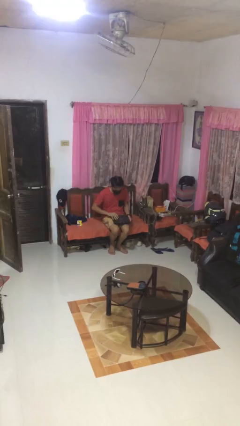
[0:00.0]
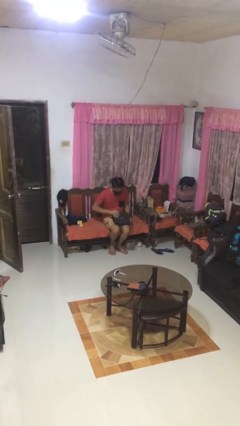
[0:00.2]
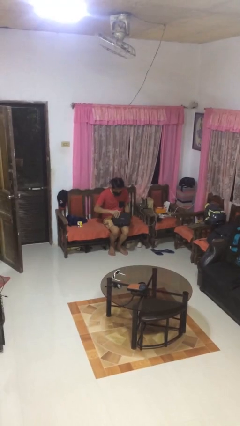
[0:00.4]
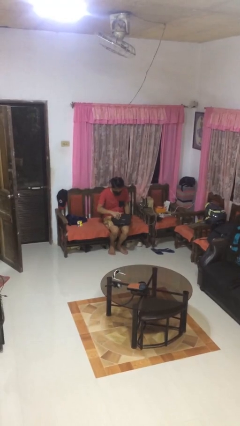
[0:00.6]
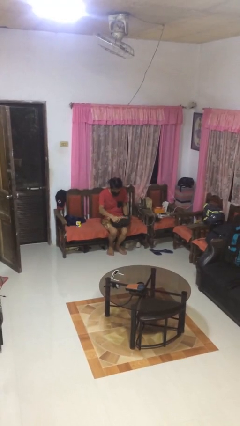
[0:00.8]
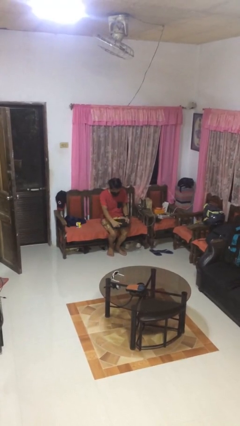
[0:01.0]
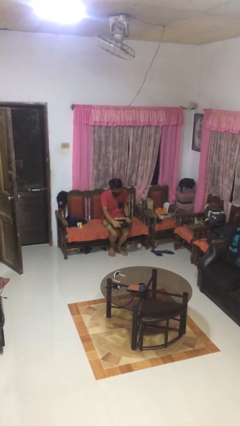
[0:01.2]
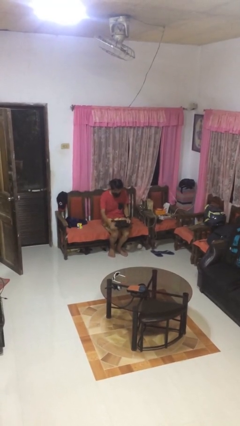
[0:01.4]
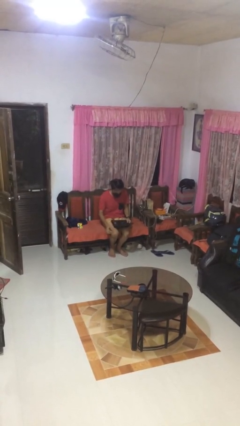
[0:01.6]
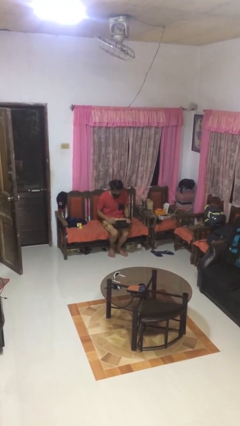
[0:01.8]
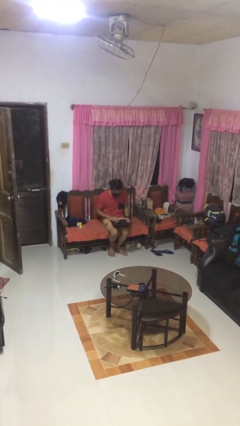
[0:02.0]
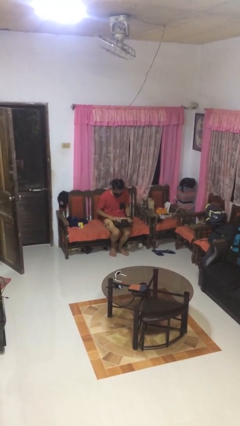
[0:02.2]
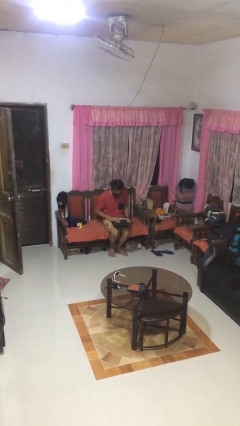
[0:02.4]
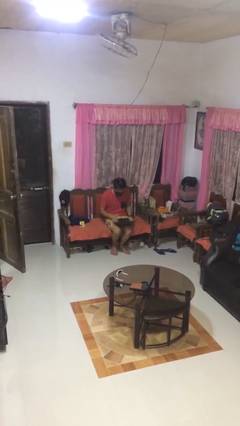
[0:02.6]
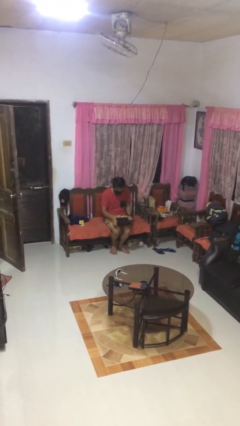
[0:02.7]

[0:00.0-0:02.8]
person opens laptop

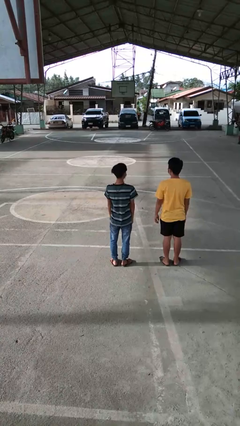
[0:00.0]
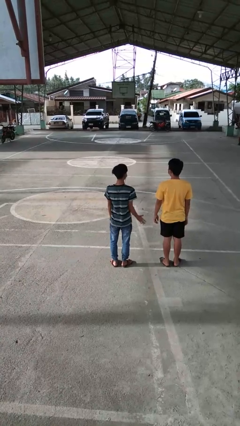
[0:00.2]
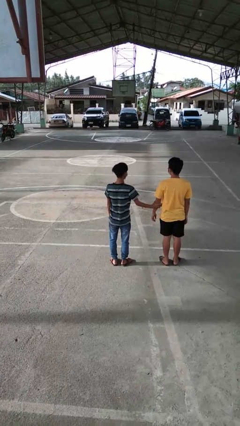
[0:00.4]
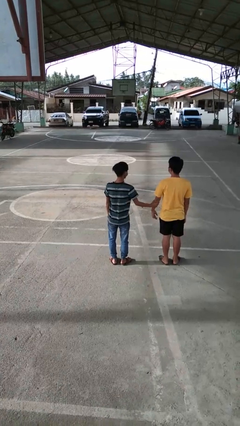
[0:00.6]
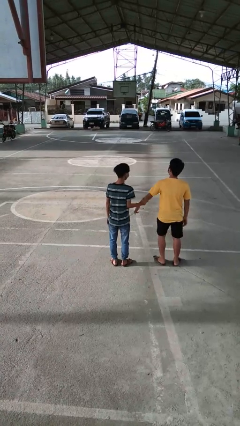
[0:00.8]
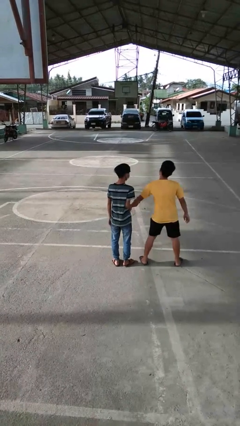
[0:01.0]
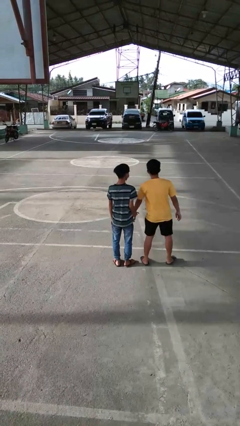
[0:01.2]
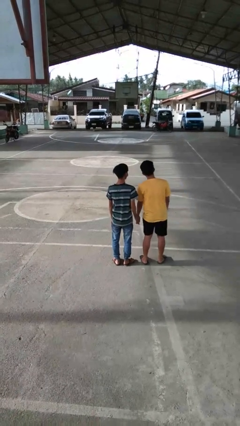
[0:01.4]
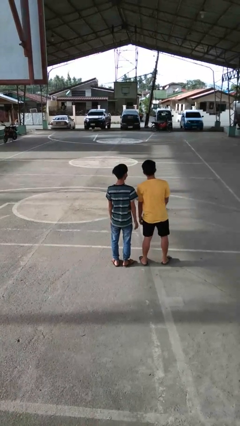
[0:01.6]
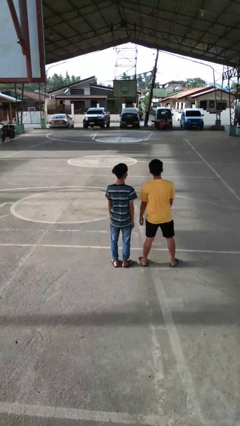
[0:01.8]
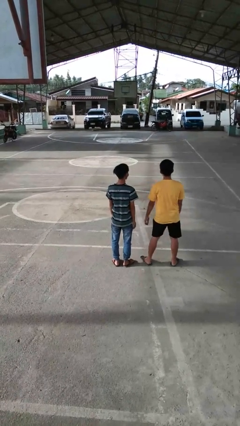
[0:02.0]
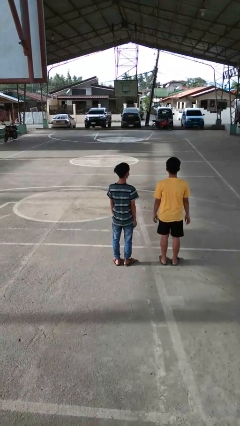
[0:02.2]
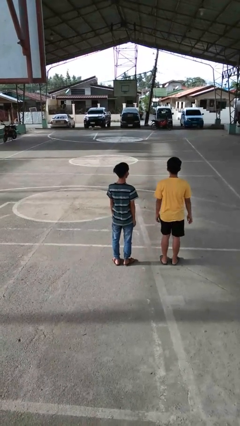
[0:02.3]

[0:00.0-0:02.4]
person grabs person by forearm

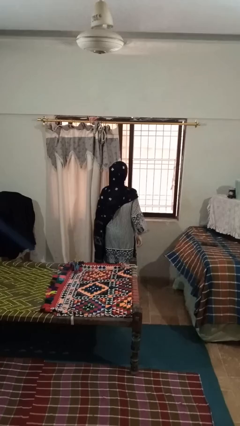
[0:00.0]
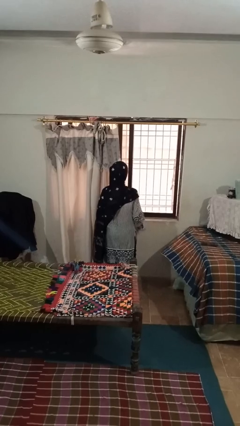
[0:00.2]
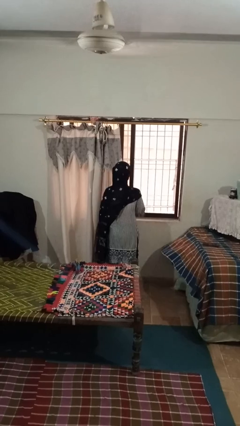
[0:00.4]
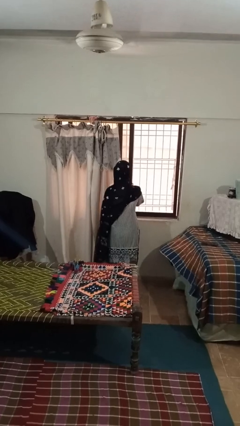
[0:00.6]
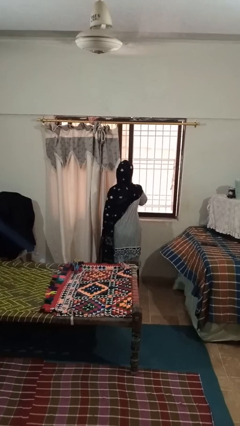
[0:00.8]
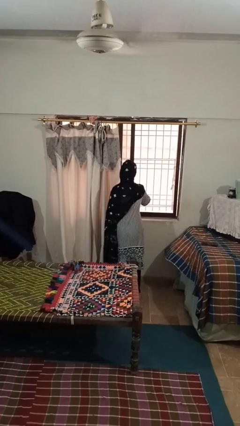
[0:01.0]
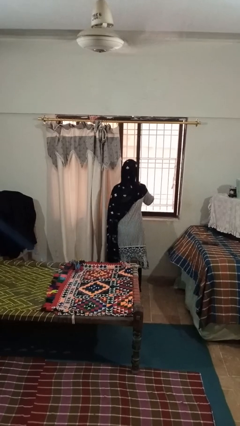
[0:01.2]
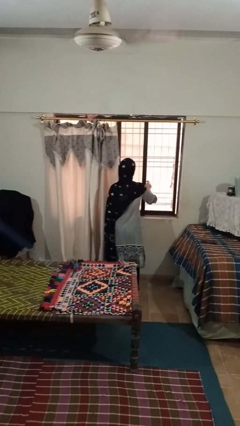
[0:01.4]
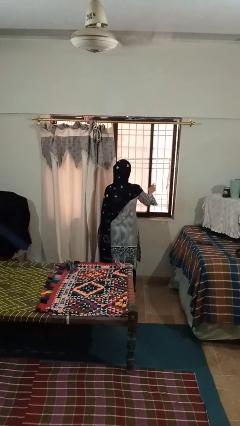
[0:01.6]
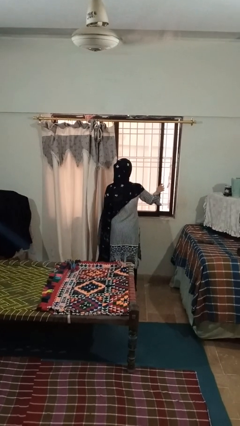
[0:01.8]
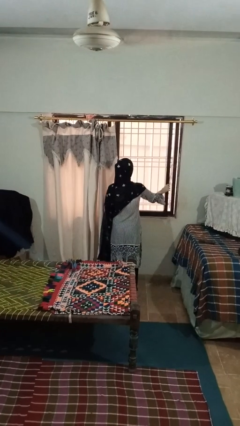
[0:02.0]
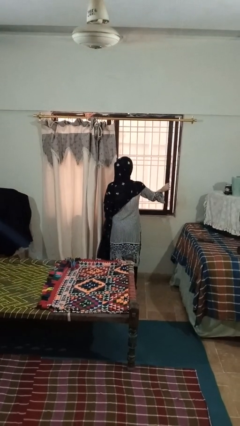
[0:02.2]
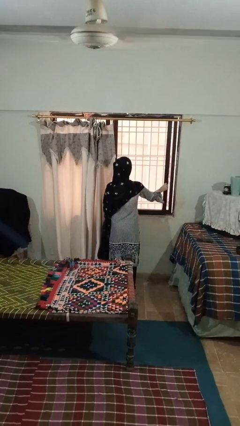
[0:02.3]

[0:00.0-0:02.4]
person closes home window

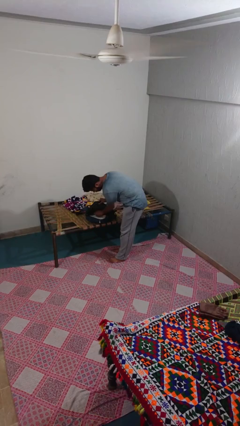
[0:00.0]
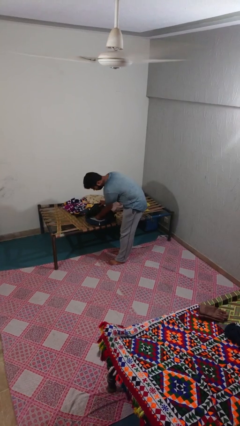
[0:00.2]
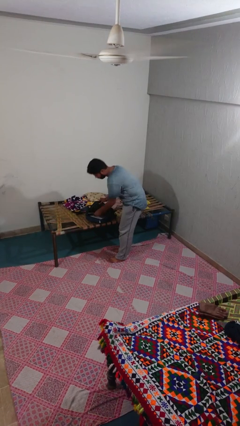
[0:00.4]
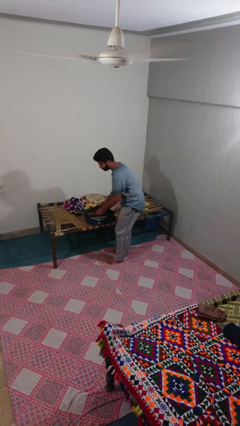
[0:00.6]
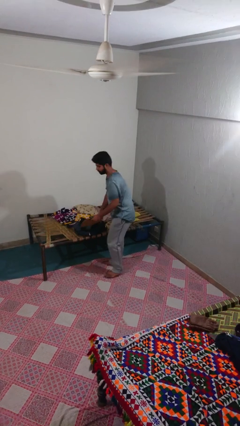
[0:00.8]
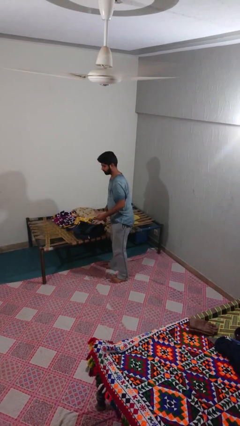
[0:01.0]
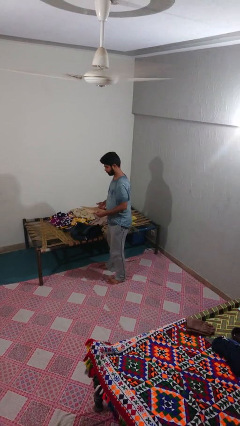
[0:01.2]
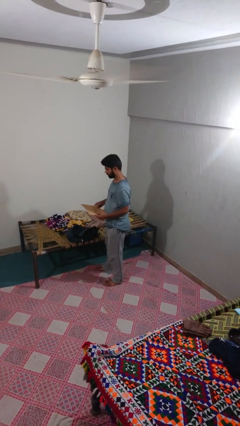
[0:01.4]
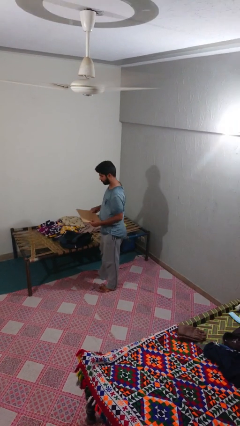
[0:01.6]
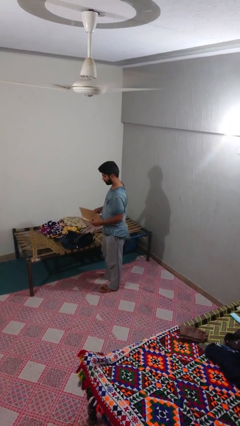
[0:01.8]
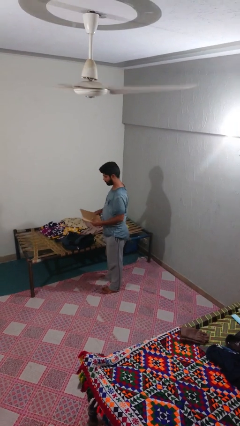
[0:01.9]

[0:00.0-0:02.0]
person takes object from backpack

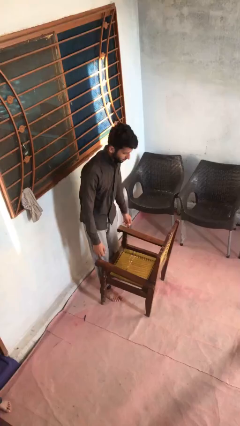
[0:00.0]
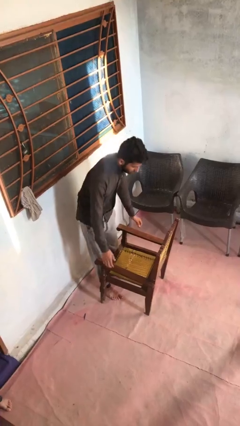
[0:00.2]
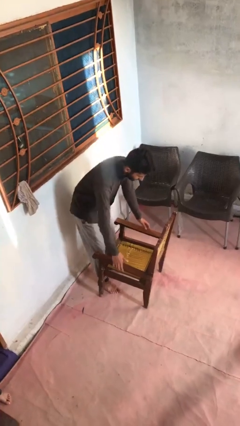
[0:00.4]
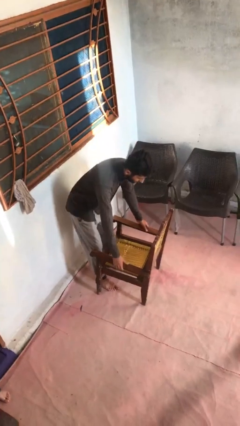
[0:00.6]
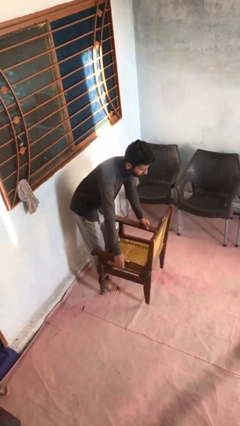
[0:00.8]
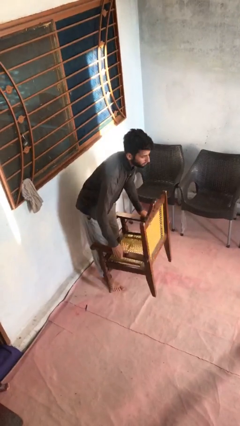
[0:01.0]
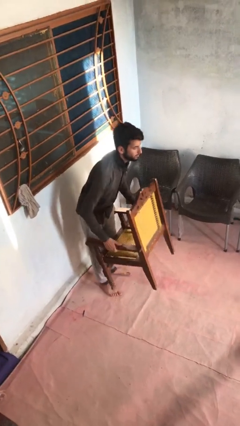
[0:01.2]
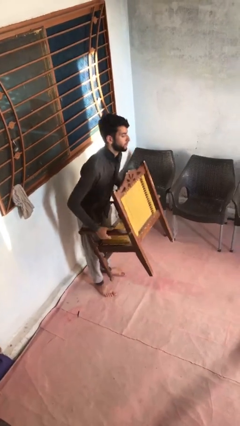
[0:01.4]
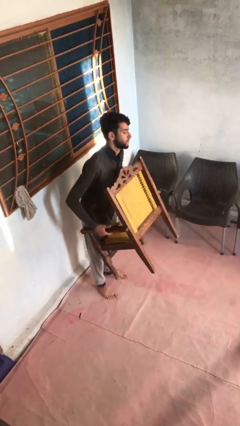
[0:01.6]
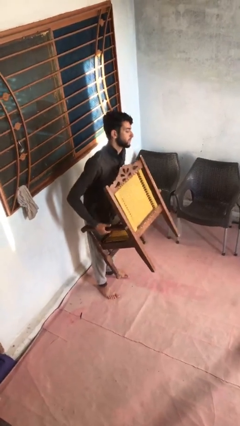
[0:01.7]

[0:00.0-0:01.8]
person picks up object from floor

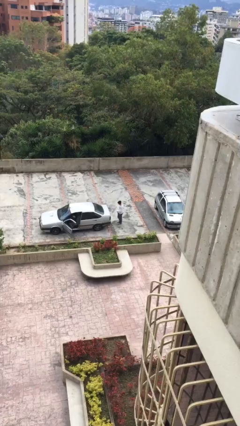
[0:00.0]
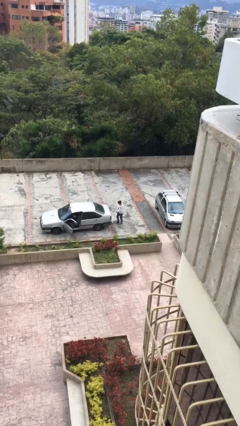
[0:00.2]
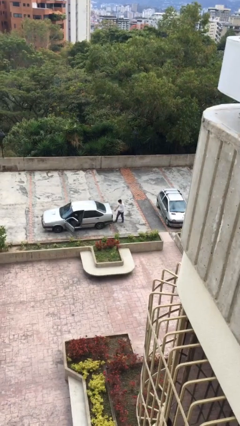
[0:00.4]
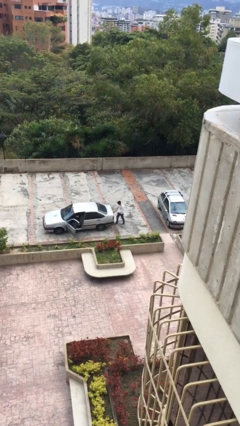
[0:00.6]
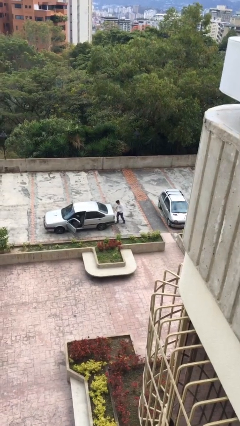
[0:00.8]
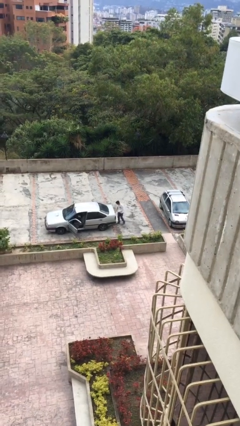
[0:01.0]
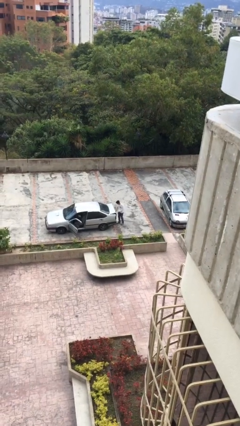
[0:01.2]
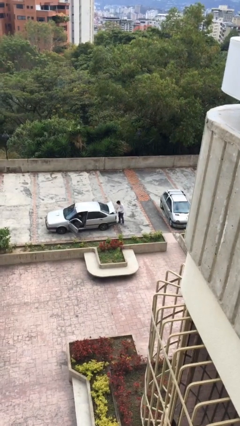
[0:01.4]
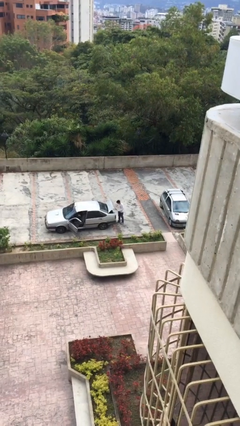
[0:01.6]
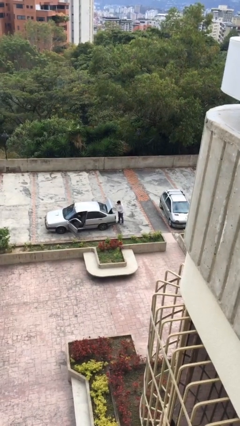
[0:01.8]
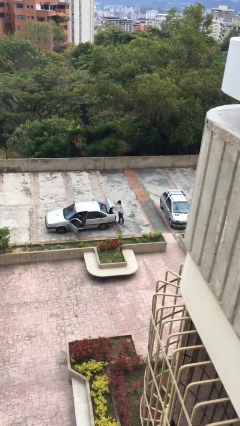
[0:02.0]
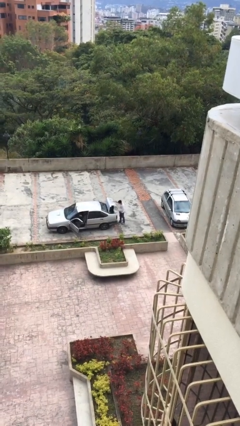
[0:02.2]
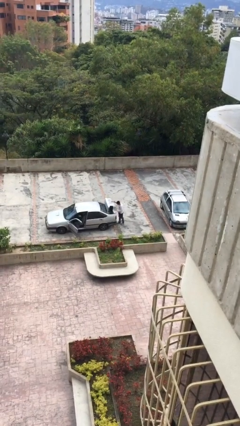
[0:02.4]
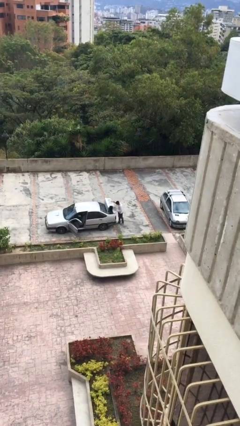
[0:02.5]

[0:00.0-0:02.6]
person opens car trunk

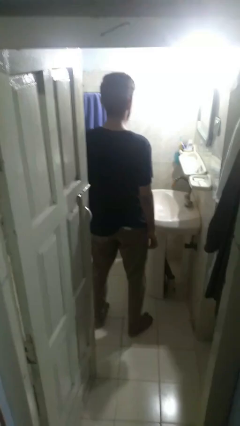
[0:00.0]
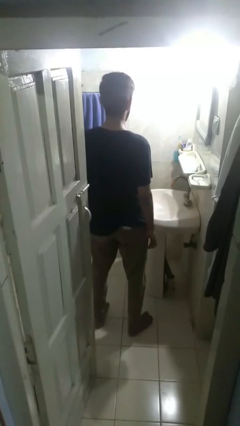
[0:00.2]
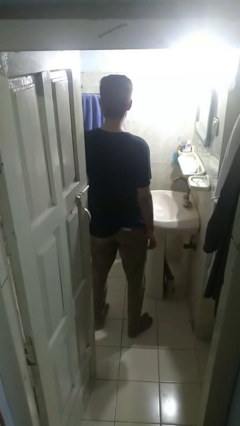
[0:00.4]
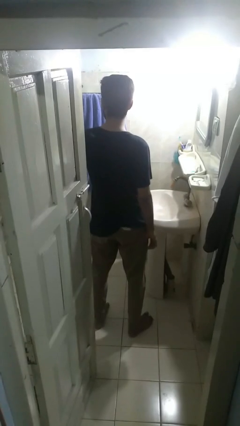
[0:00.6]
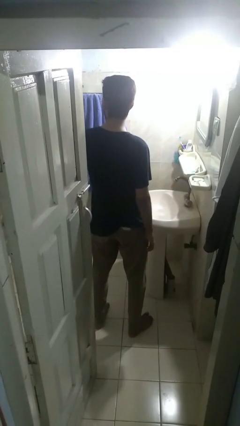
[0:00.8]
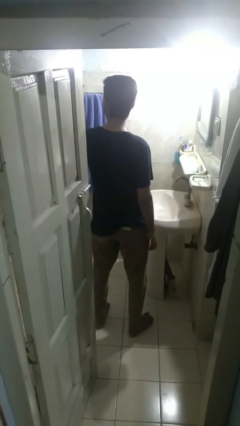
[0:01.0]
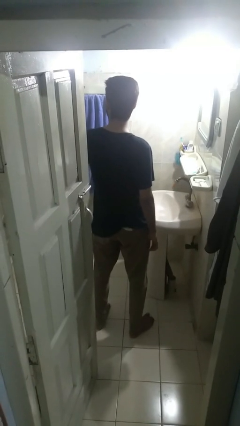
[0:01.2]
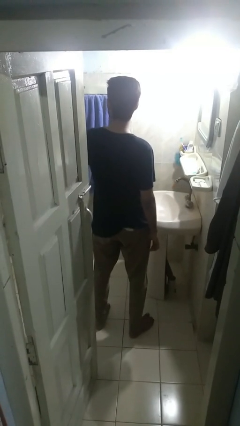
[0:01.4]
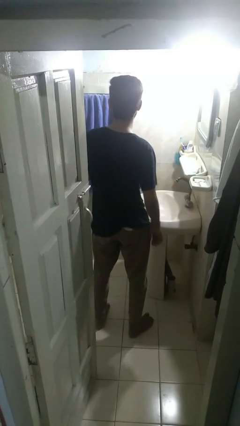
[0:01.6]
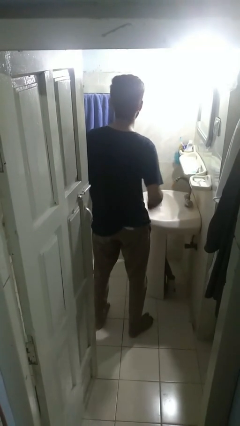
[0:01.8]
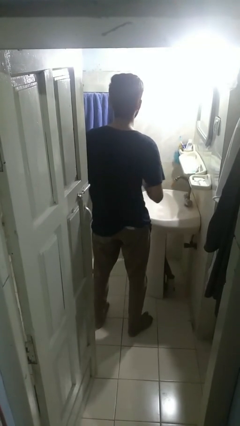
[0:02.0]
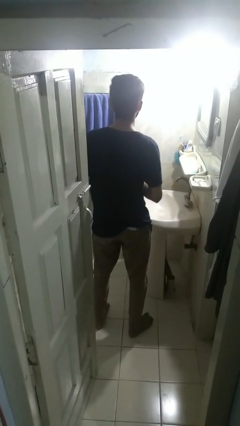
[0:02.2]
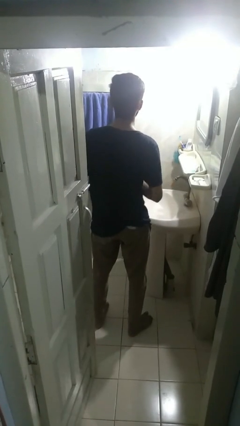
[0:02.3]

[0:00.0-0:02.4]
person flosses

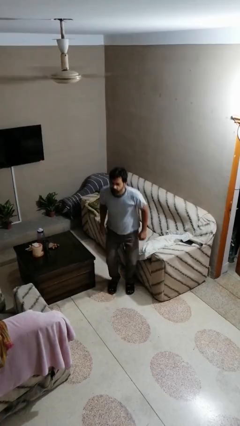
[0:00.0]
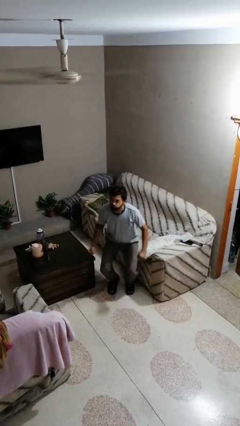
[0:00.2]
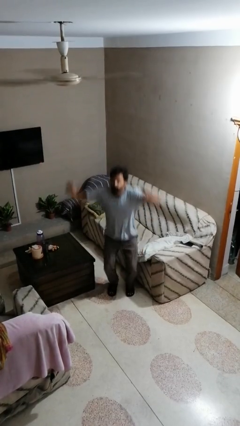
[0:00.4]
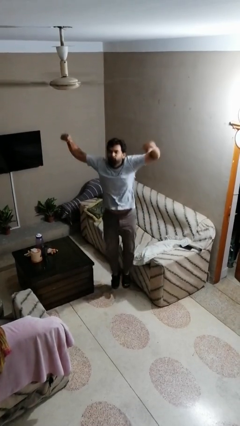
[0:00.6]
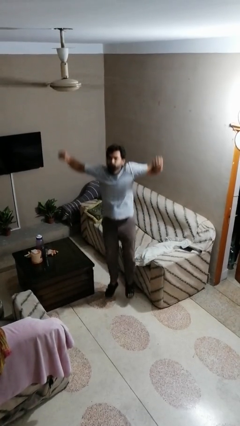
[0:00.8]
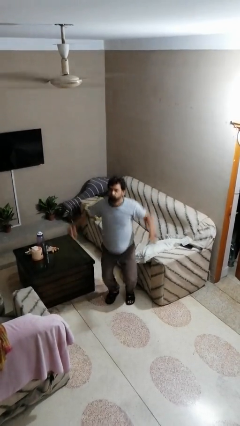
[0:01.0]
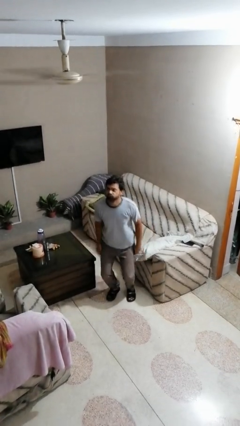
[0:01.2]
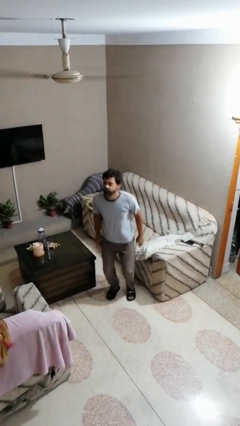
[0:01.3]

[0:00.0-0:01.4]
person jumps
